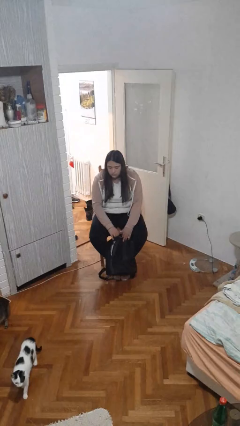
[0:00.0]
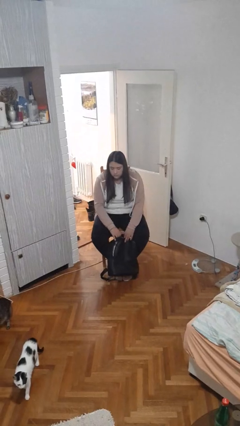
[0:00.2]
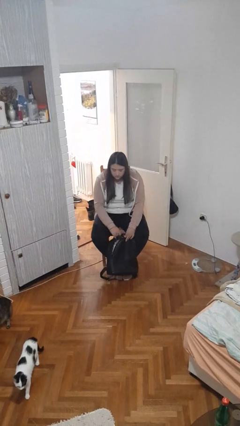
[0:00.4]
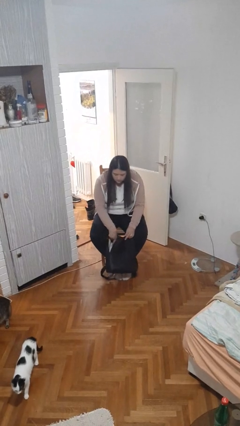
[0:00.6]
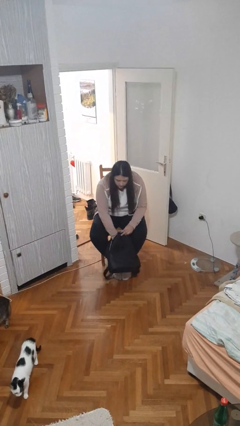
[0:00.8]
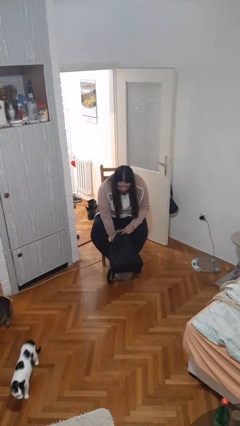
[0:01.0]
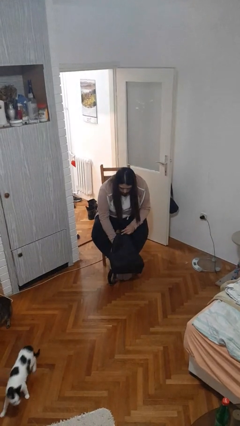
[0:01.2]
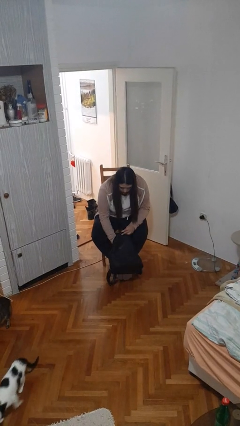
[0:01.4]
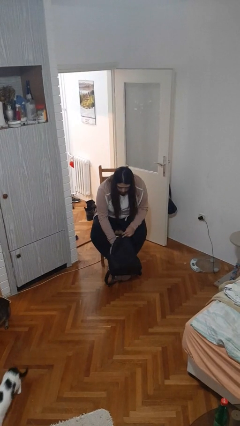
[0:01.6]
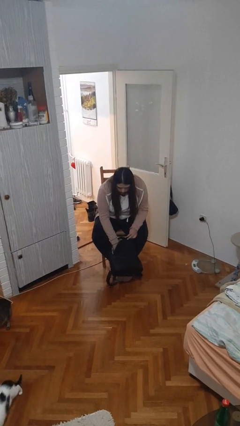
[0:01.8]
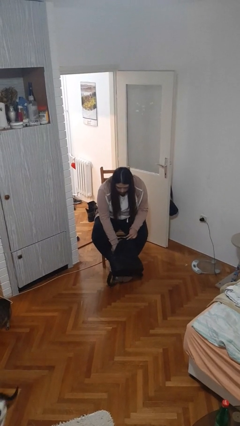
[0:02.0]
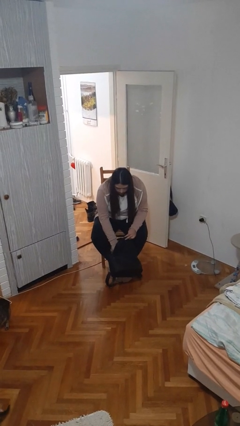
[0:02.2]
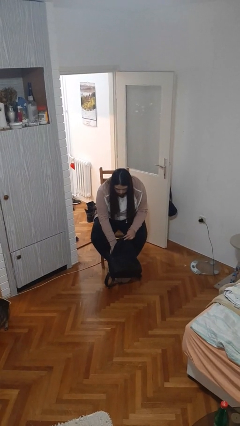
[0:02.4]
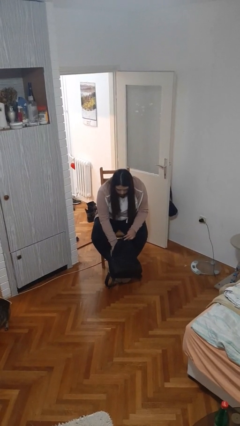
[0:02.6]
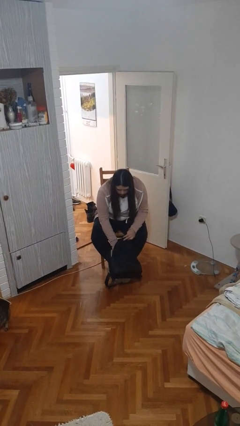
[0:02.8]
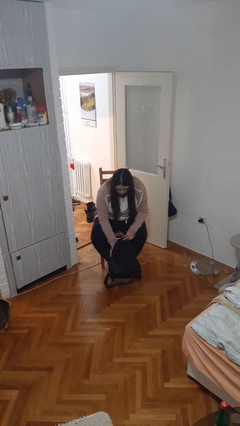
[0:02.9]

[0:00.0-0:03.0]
person searches in backpack

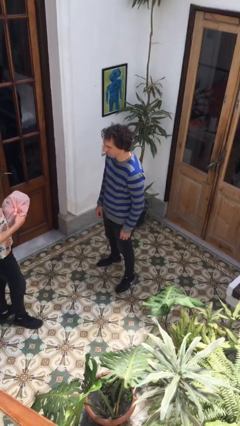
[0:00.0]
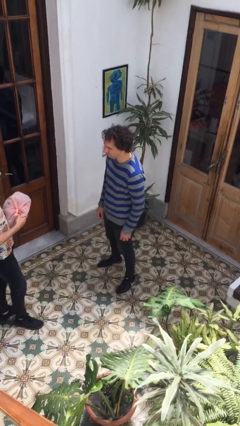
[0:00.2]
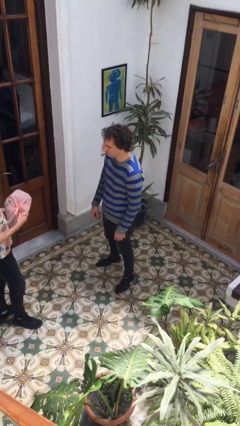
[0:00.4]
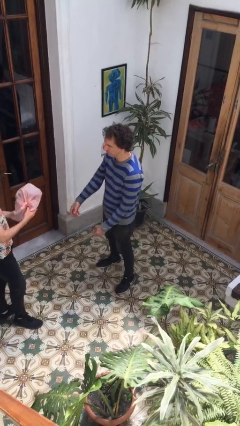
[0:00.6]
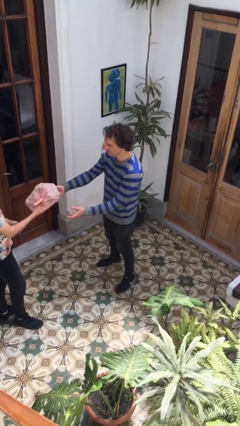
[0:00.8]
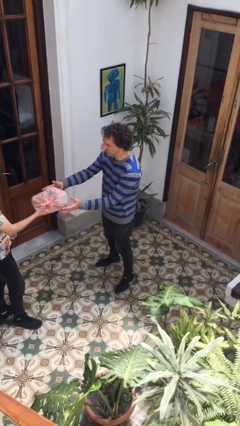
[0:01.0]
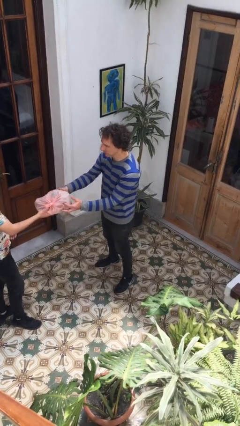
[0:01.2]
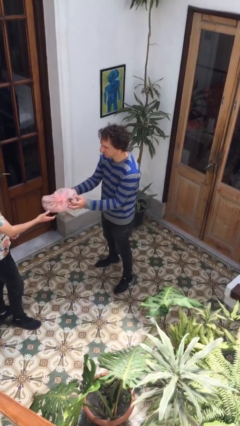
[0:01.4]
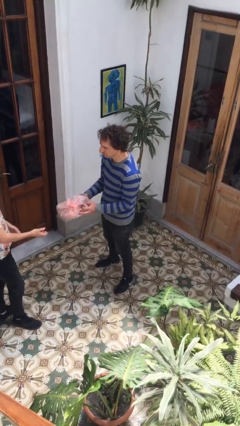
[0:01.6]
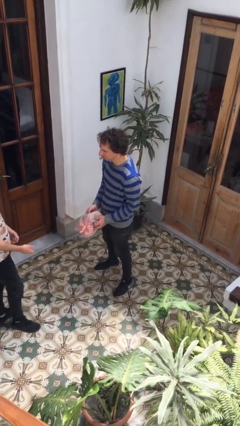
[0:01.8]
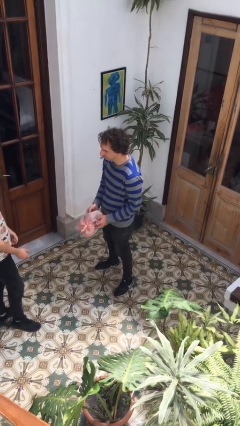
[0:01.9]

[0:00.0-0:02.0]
person transfers object to person

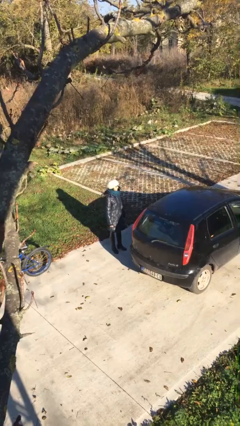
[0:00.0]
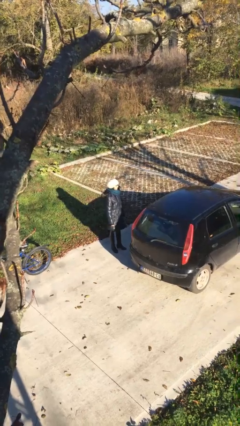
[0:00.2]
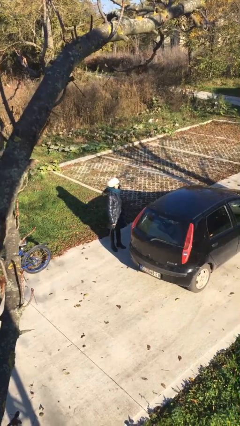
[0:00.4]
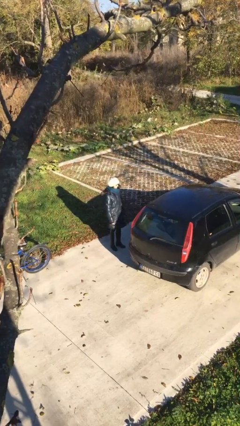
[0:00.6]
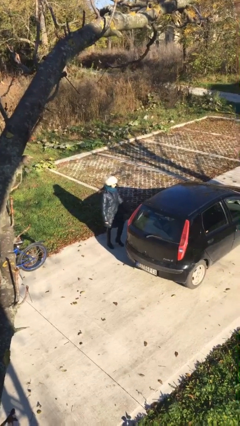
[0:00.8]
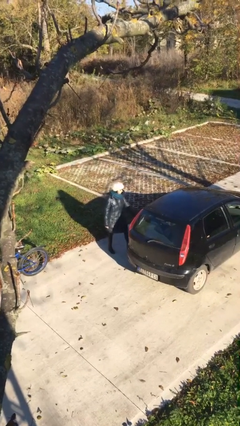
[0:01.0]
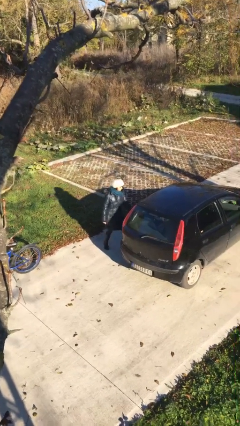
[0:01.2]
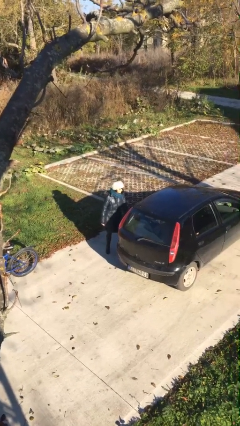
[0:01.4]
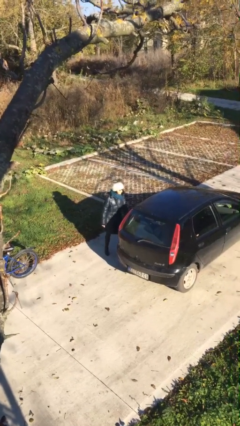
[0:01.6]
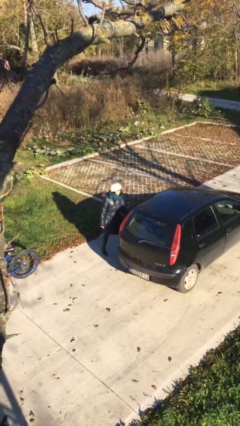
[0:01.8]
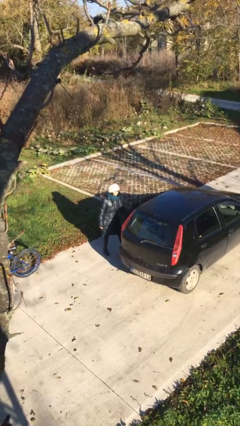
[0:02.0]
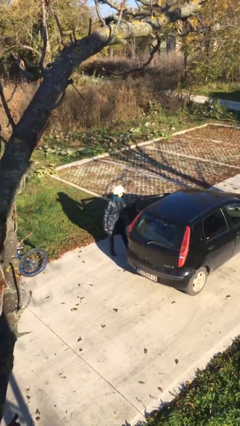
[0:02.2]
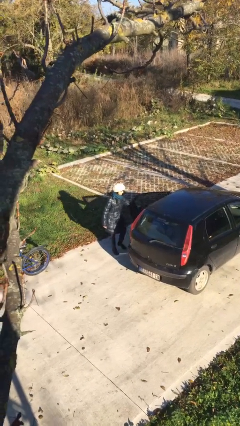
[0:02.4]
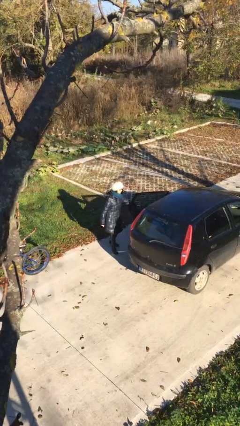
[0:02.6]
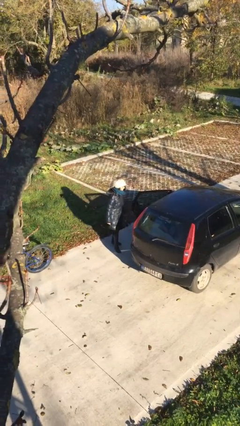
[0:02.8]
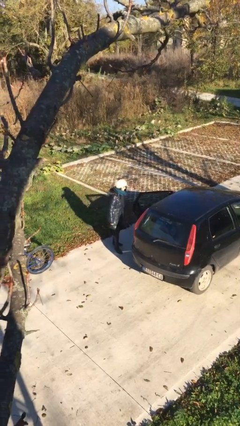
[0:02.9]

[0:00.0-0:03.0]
person opens car door

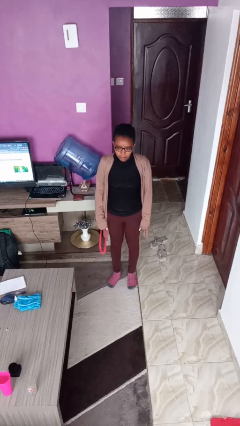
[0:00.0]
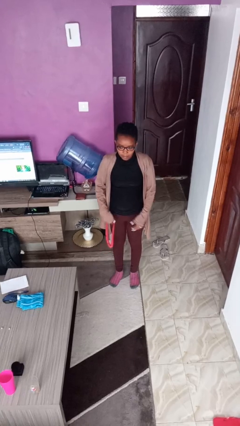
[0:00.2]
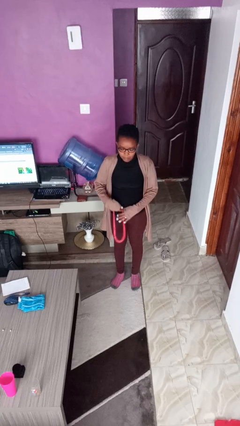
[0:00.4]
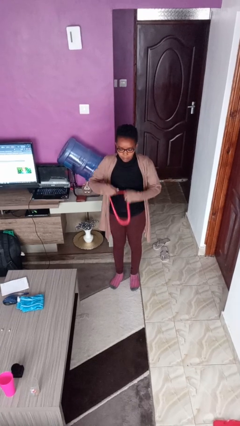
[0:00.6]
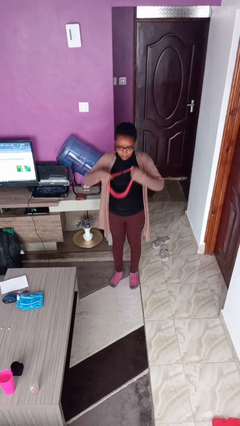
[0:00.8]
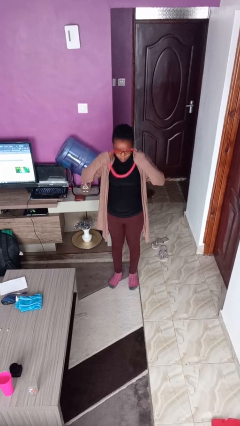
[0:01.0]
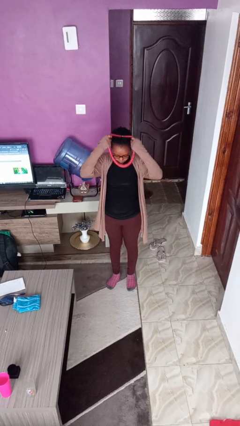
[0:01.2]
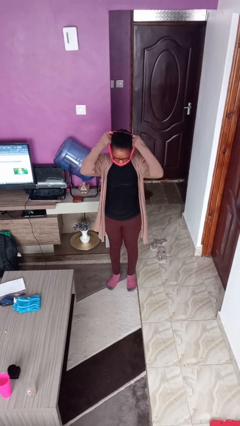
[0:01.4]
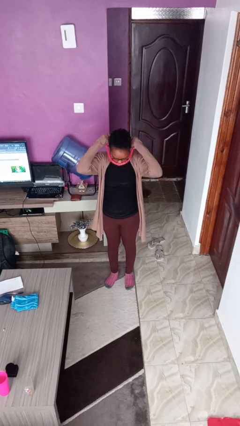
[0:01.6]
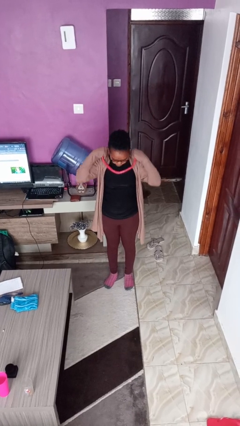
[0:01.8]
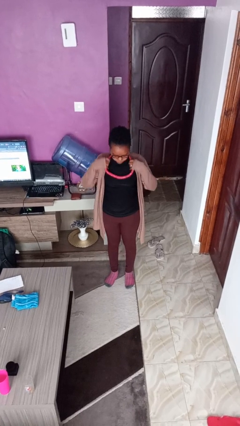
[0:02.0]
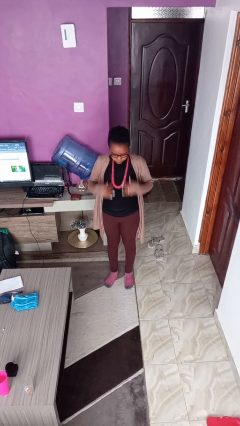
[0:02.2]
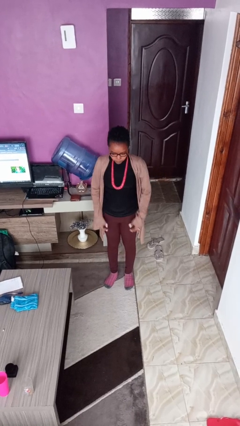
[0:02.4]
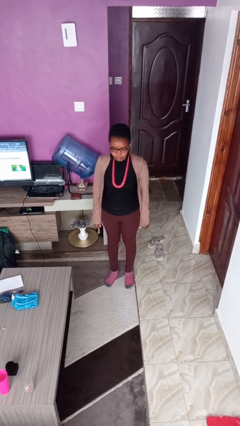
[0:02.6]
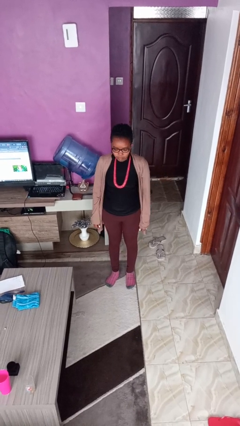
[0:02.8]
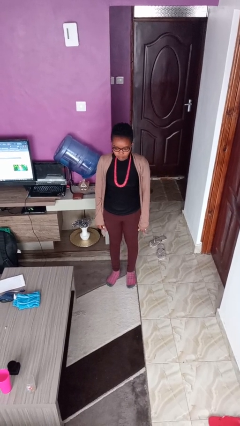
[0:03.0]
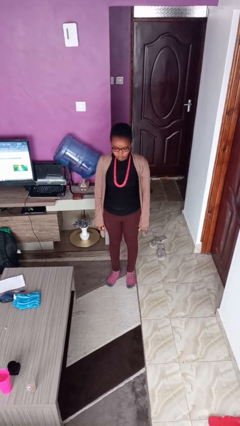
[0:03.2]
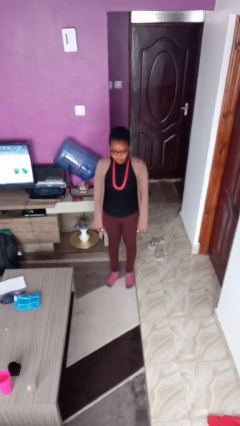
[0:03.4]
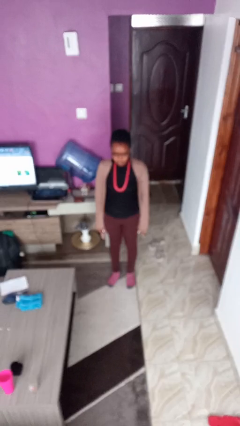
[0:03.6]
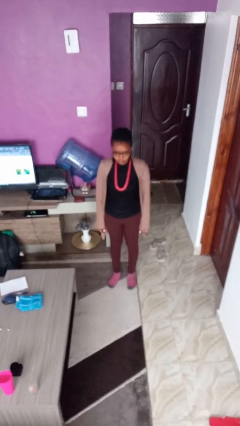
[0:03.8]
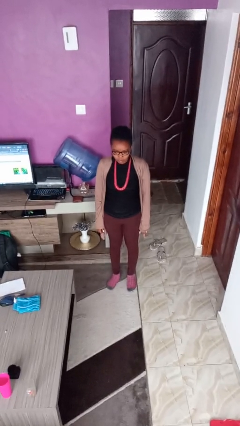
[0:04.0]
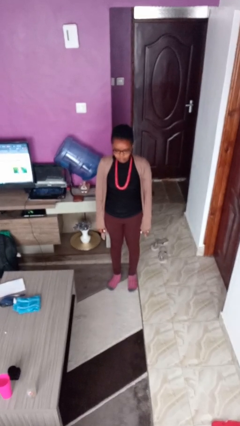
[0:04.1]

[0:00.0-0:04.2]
person puts on necklace

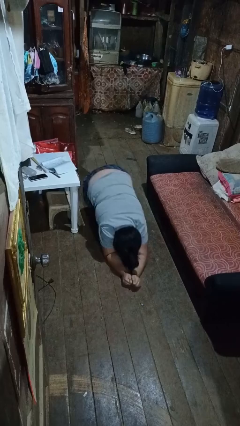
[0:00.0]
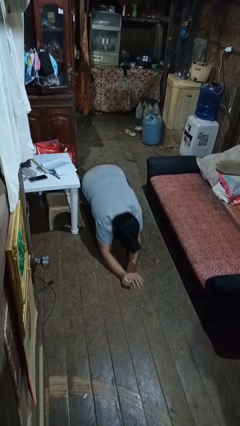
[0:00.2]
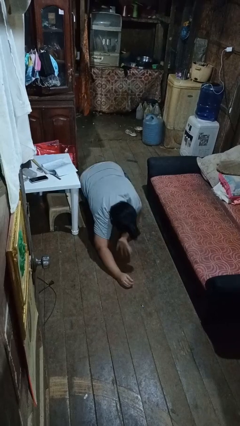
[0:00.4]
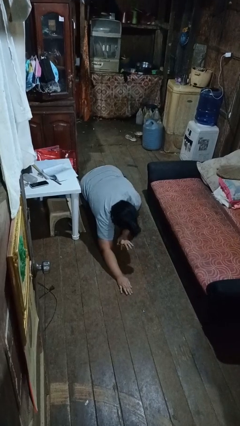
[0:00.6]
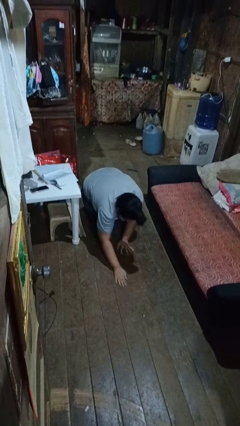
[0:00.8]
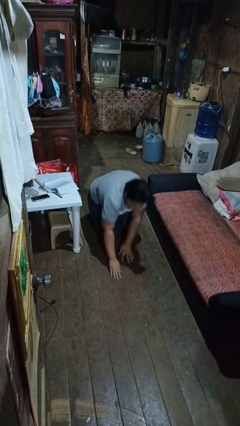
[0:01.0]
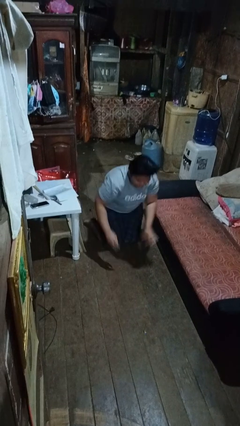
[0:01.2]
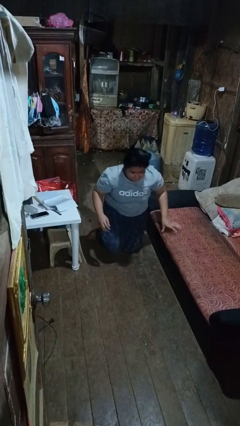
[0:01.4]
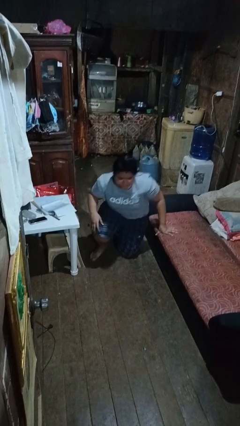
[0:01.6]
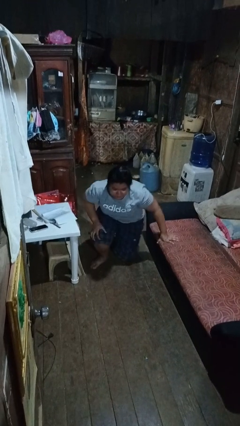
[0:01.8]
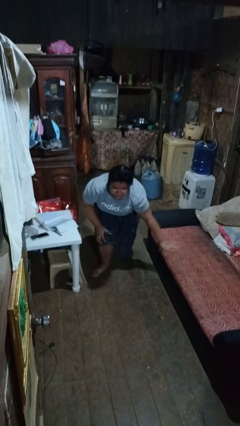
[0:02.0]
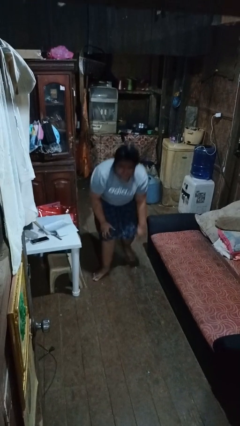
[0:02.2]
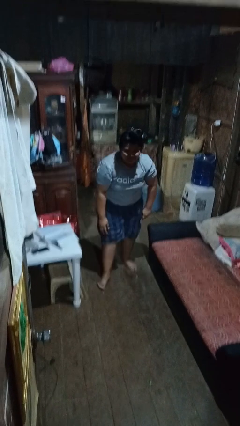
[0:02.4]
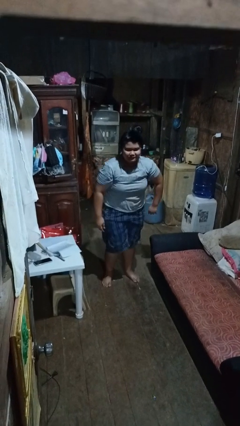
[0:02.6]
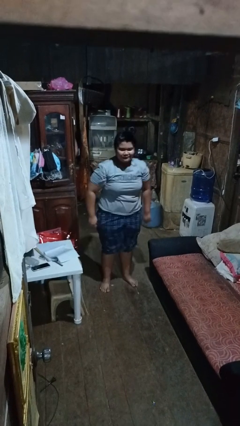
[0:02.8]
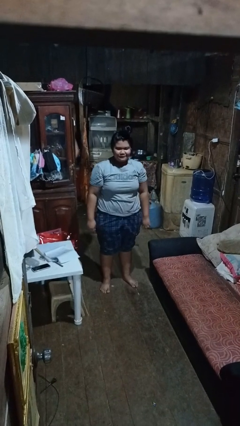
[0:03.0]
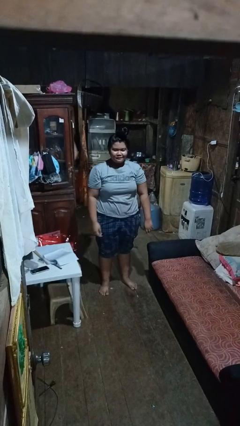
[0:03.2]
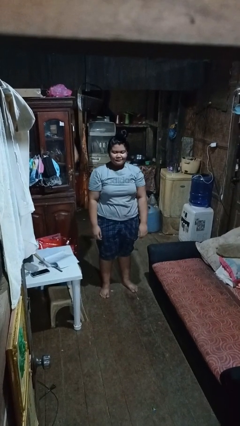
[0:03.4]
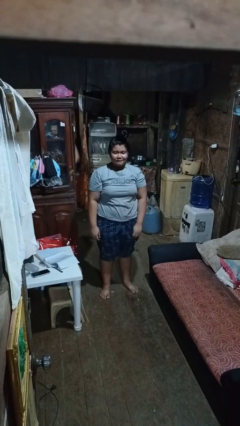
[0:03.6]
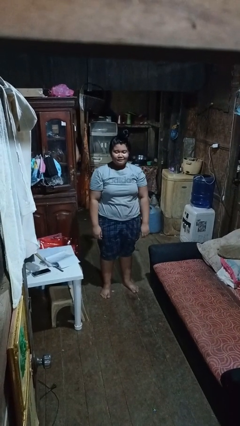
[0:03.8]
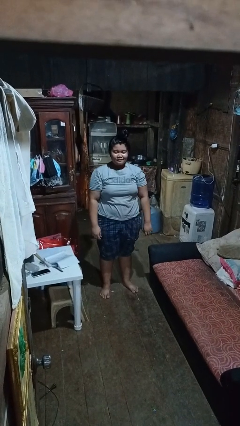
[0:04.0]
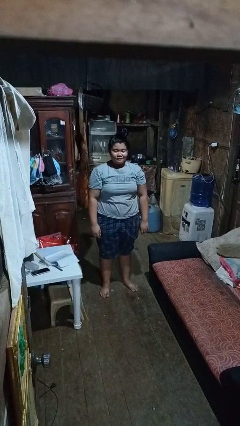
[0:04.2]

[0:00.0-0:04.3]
person stands up from floor

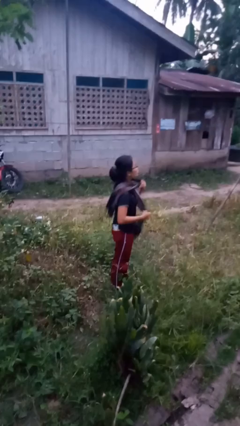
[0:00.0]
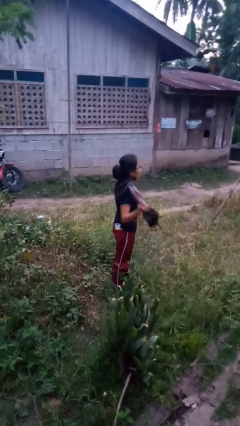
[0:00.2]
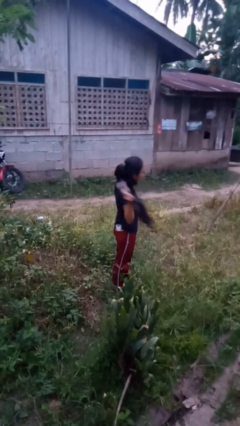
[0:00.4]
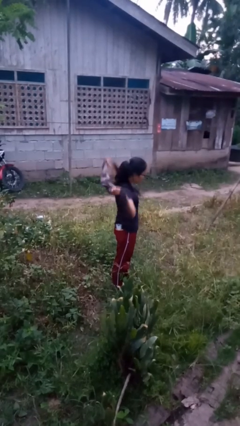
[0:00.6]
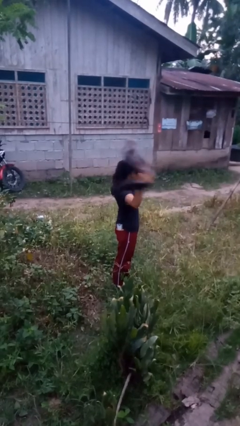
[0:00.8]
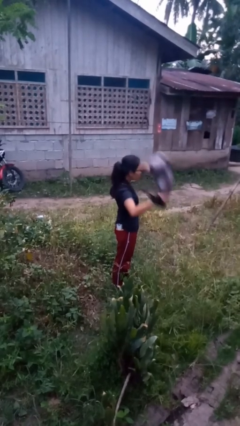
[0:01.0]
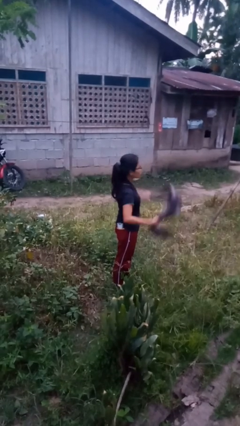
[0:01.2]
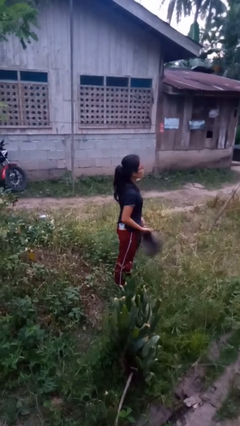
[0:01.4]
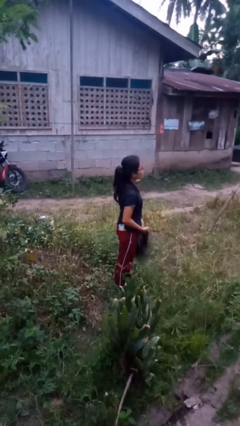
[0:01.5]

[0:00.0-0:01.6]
person takes off scarf
